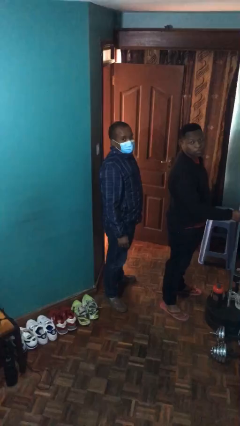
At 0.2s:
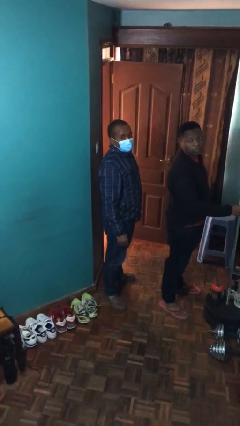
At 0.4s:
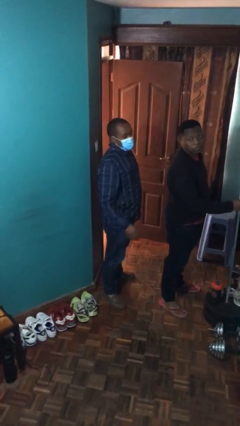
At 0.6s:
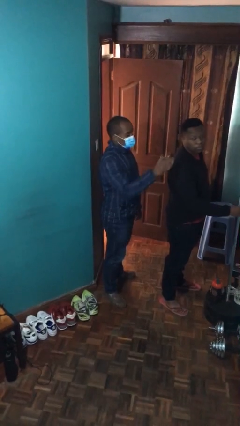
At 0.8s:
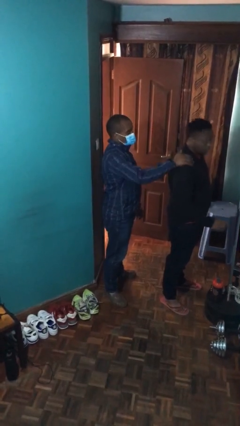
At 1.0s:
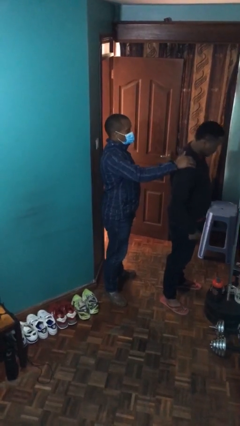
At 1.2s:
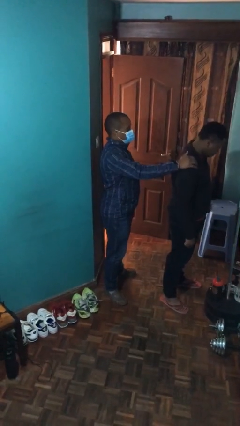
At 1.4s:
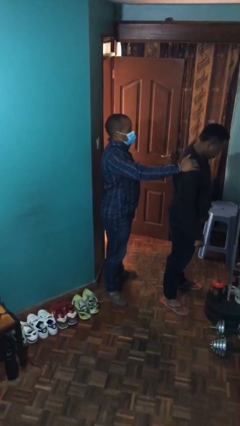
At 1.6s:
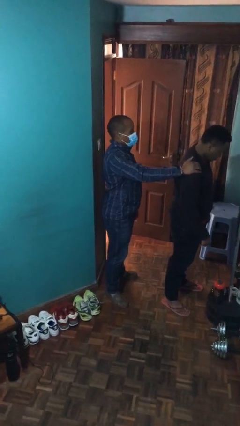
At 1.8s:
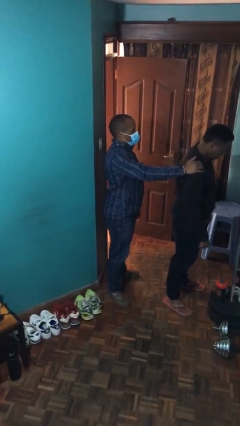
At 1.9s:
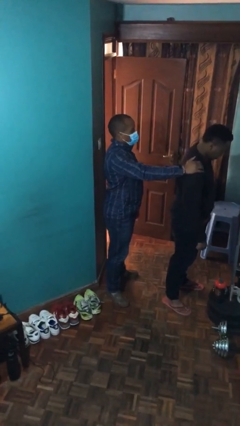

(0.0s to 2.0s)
person grabs person by shoulder

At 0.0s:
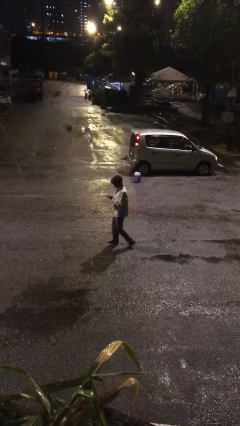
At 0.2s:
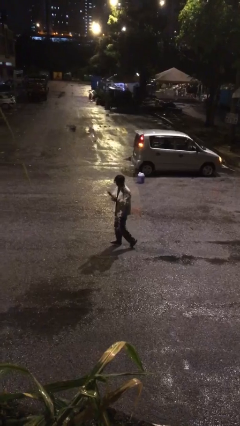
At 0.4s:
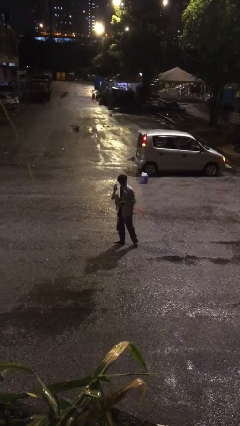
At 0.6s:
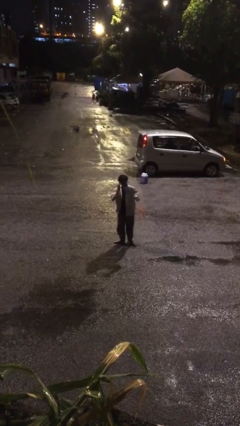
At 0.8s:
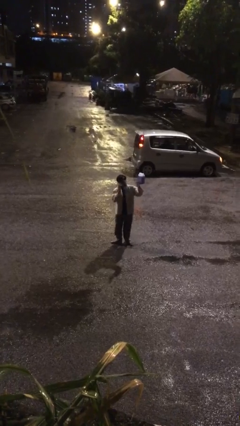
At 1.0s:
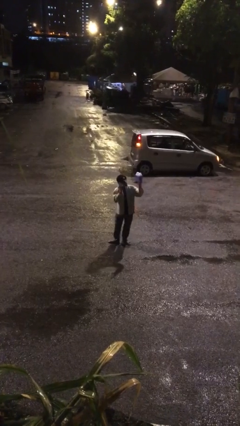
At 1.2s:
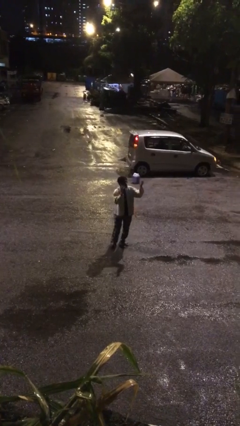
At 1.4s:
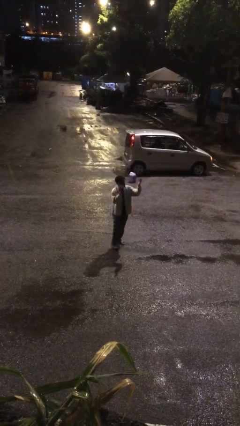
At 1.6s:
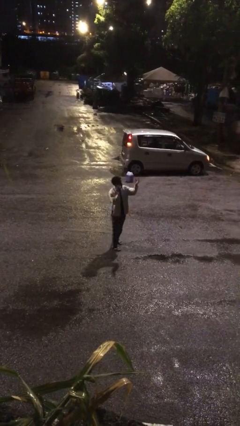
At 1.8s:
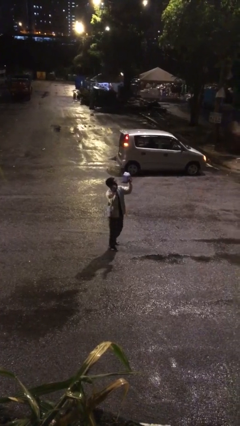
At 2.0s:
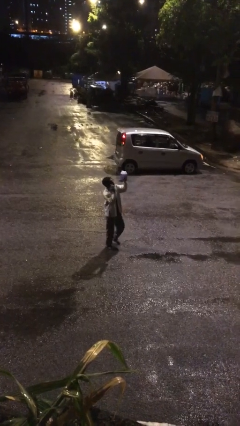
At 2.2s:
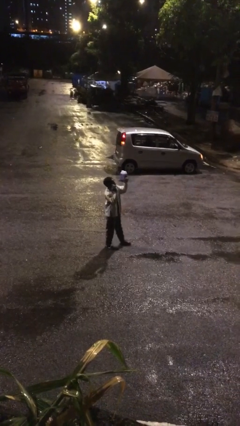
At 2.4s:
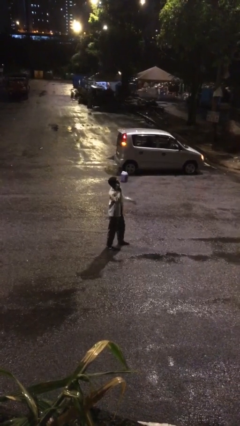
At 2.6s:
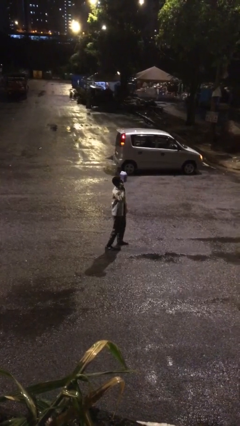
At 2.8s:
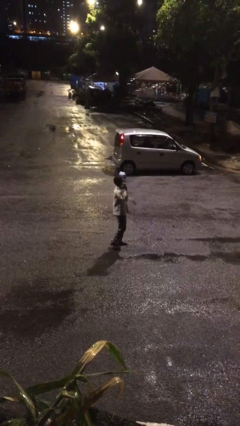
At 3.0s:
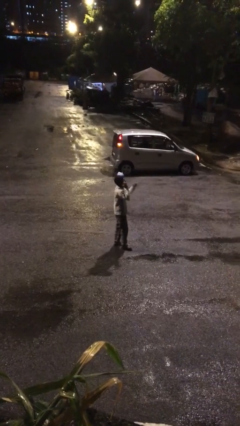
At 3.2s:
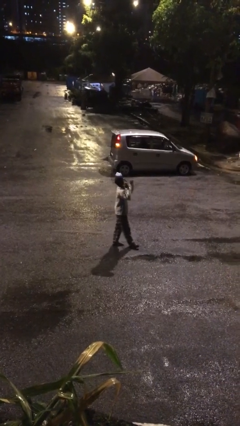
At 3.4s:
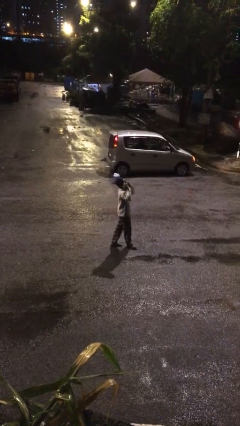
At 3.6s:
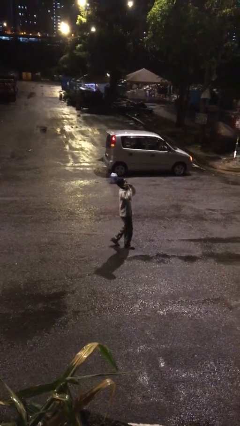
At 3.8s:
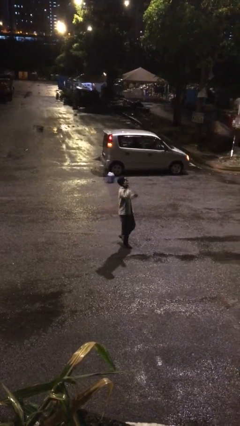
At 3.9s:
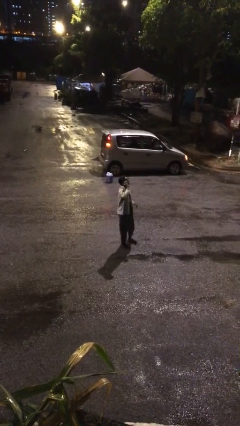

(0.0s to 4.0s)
person talks on phone

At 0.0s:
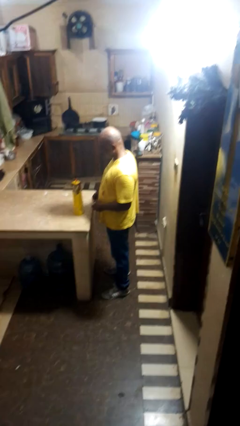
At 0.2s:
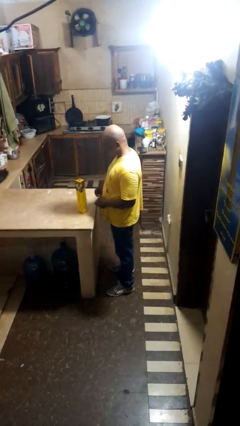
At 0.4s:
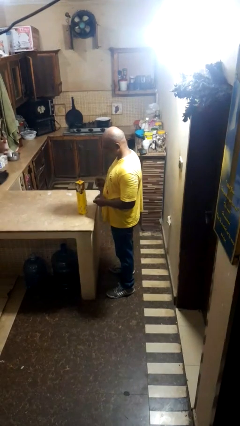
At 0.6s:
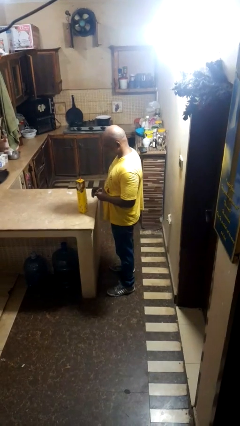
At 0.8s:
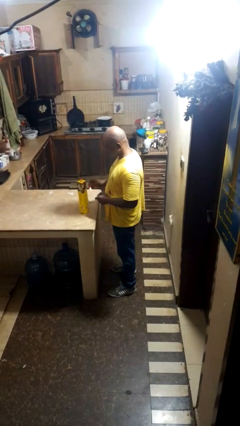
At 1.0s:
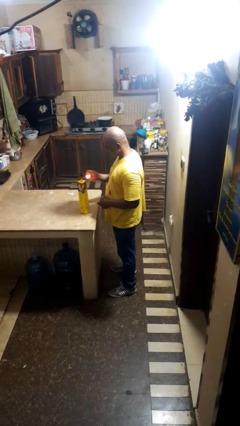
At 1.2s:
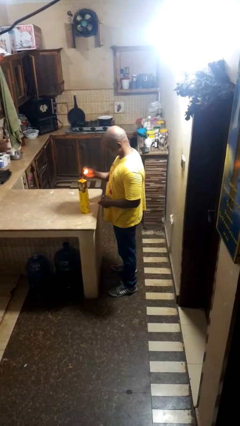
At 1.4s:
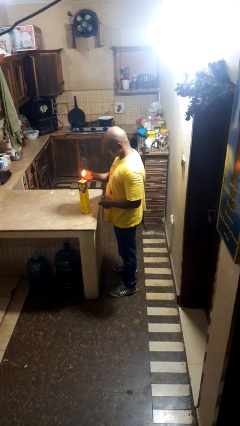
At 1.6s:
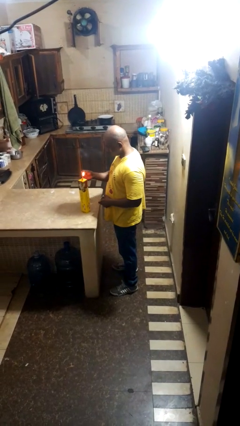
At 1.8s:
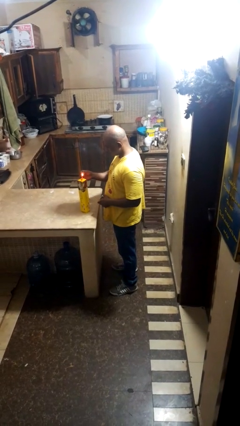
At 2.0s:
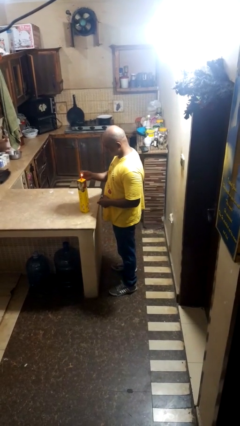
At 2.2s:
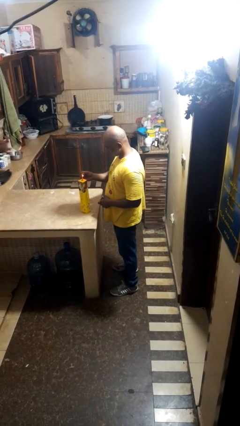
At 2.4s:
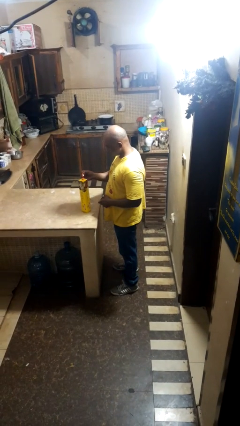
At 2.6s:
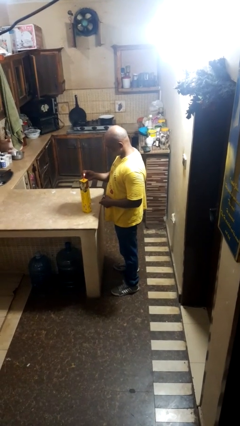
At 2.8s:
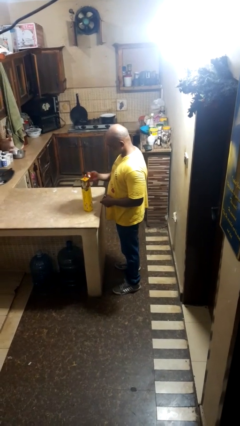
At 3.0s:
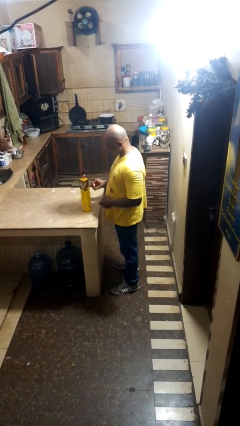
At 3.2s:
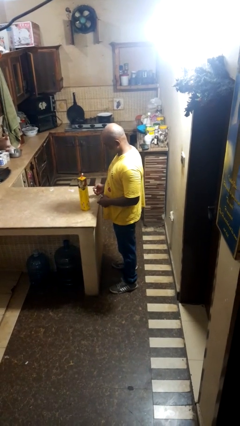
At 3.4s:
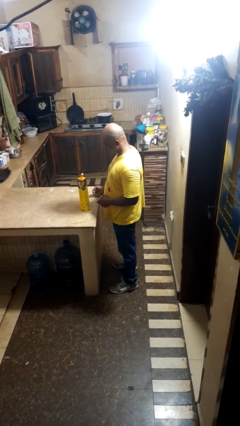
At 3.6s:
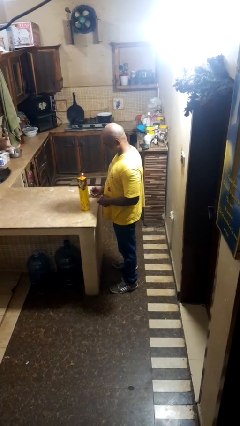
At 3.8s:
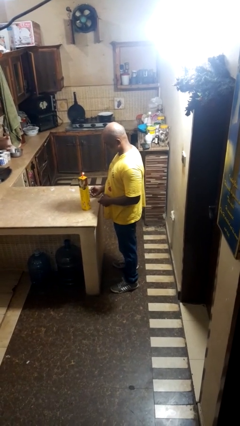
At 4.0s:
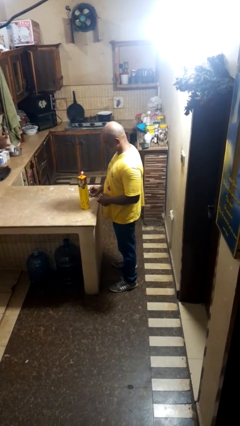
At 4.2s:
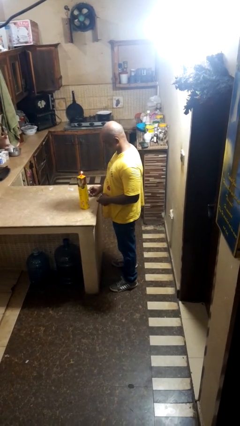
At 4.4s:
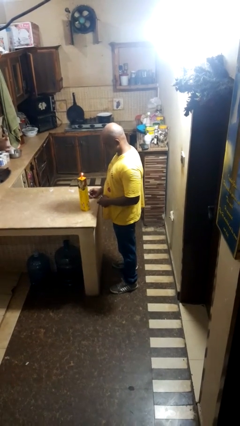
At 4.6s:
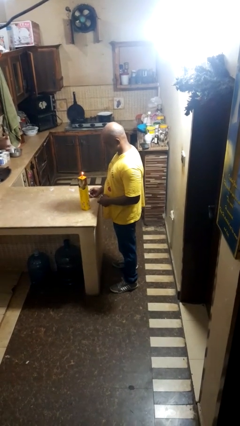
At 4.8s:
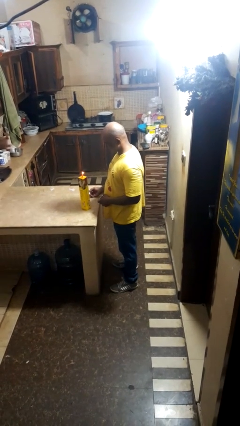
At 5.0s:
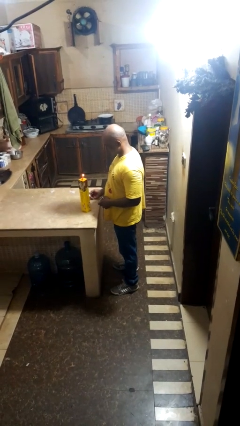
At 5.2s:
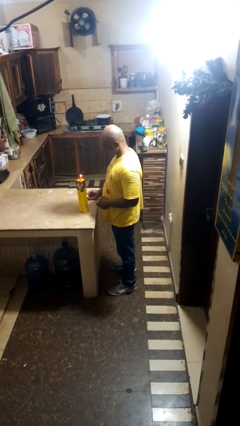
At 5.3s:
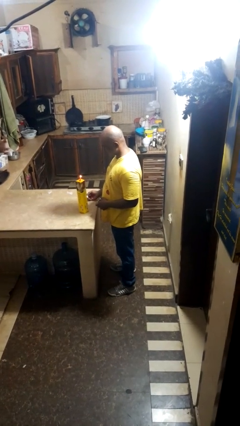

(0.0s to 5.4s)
person lights candle

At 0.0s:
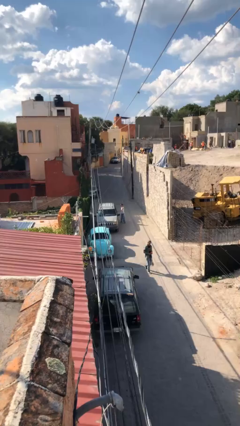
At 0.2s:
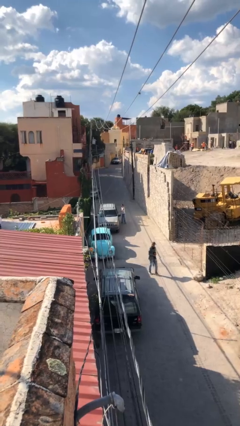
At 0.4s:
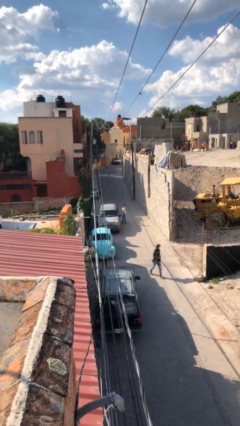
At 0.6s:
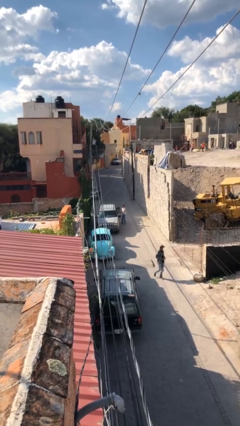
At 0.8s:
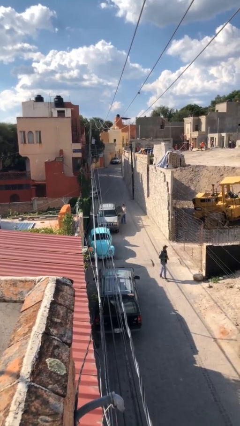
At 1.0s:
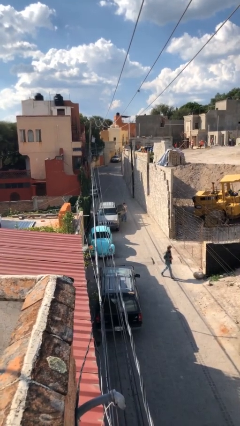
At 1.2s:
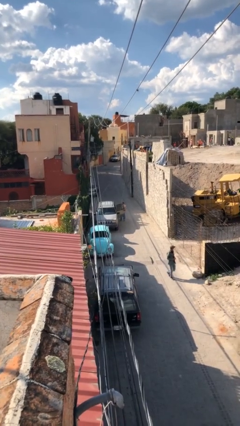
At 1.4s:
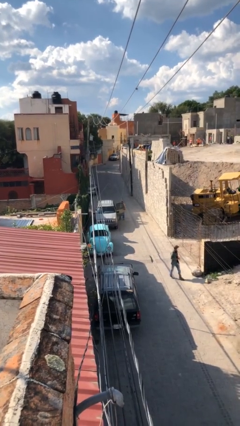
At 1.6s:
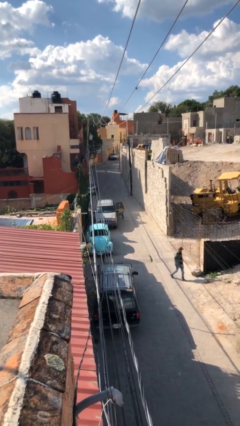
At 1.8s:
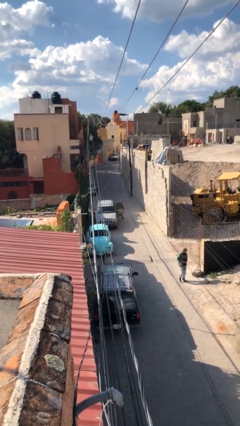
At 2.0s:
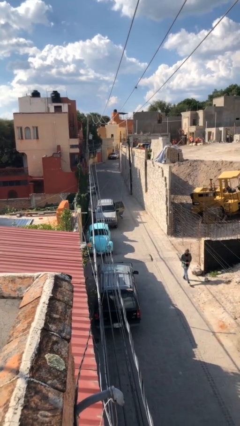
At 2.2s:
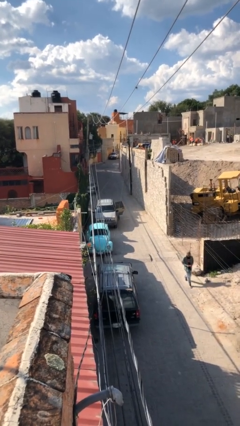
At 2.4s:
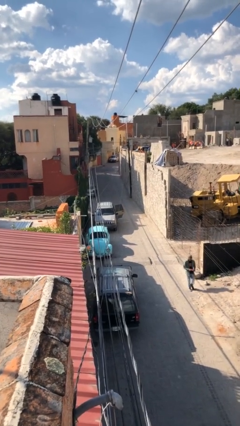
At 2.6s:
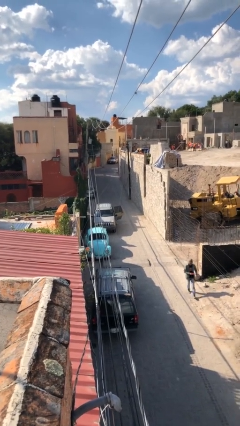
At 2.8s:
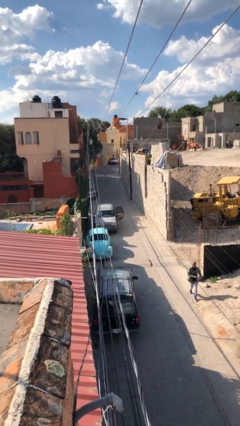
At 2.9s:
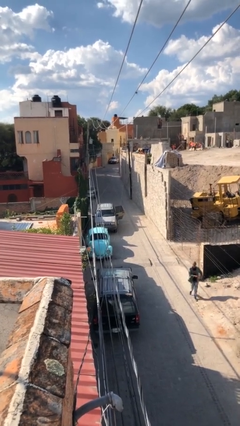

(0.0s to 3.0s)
person opens car door

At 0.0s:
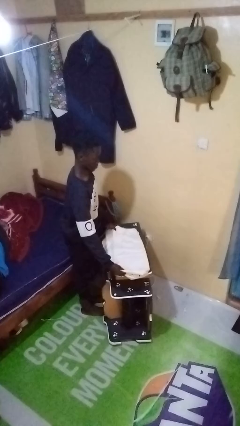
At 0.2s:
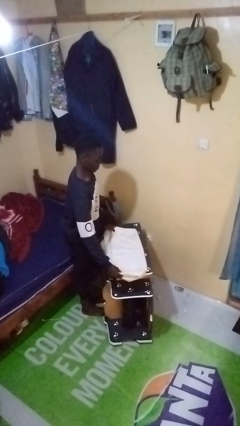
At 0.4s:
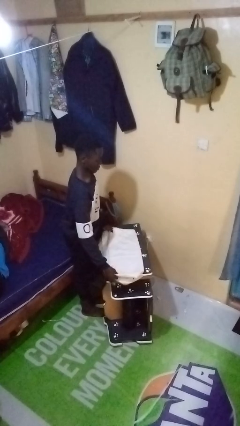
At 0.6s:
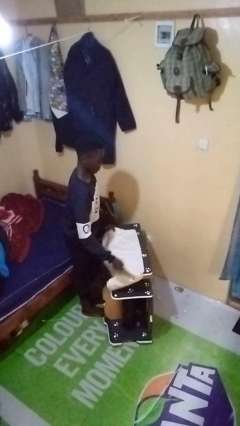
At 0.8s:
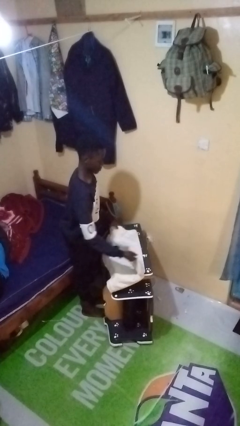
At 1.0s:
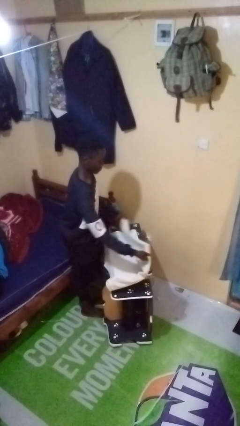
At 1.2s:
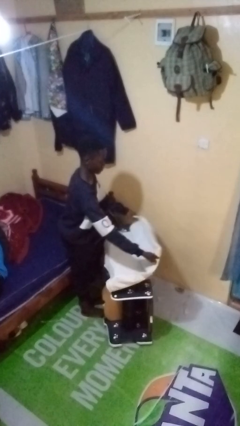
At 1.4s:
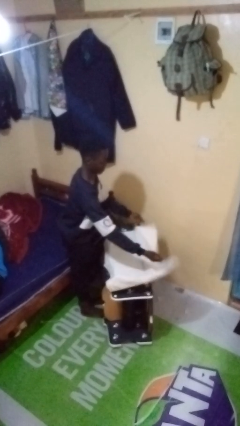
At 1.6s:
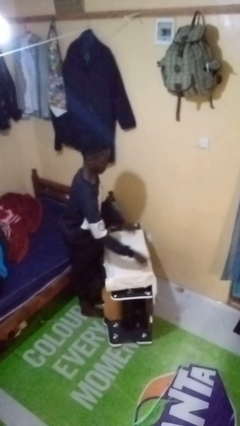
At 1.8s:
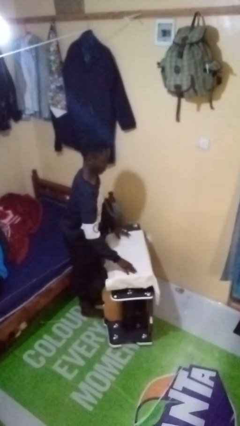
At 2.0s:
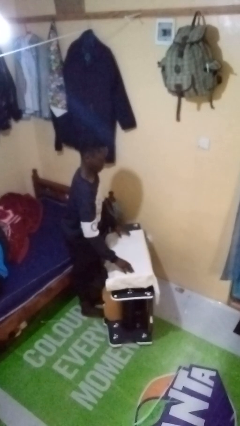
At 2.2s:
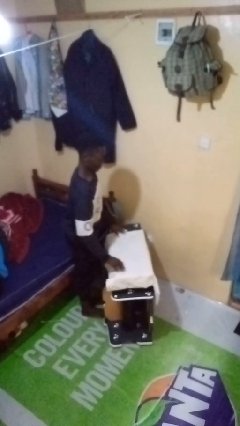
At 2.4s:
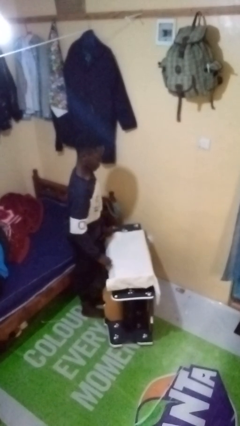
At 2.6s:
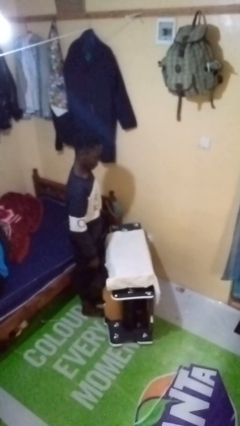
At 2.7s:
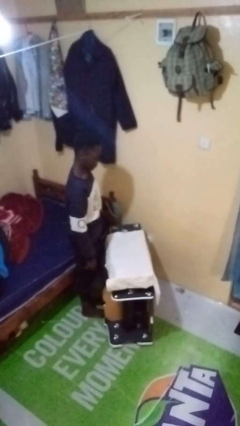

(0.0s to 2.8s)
person spreads tablecloth

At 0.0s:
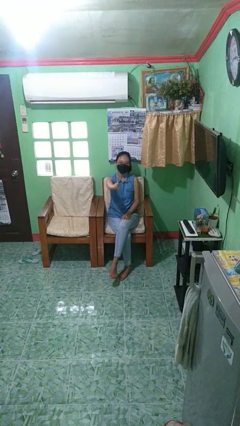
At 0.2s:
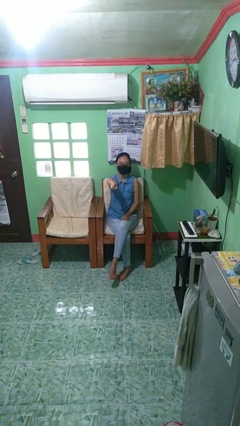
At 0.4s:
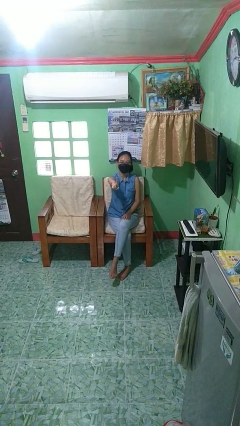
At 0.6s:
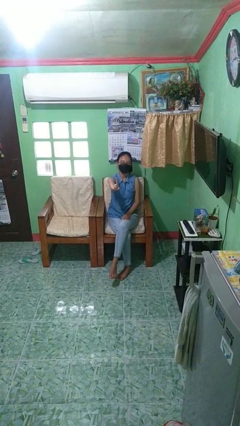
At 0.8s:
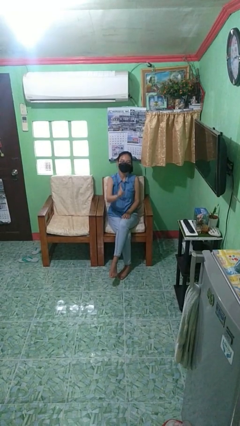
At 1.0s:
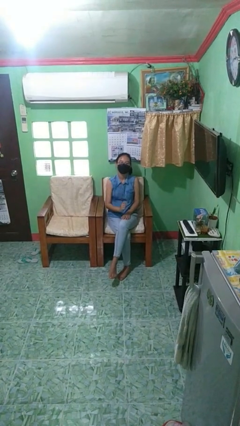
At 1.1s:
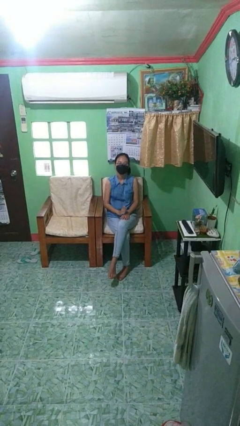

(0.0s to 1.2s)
person gestures number one
